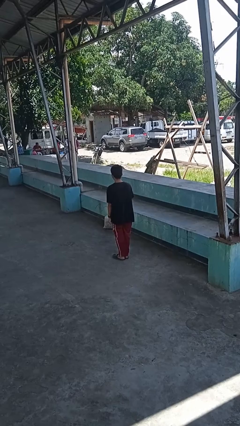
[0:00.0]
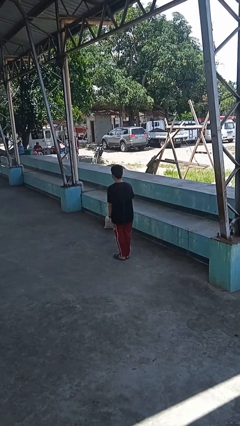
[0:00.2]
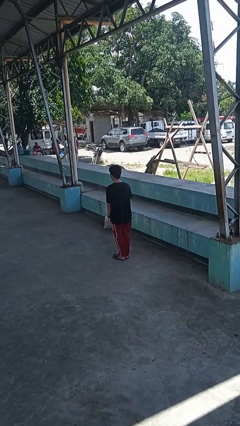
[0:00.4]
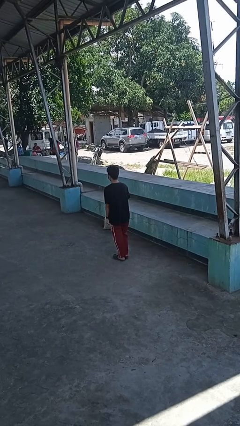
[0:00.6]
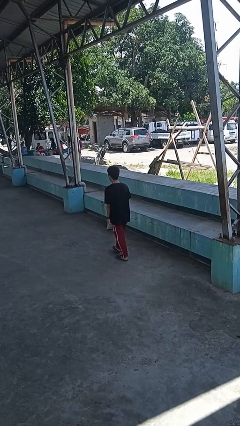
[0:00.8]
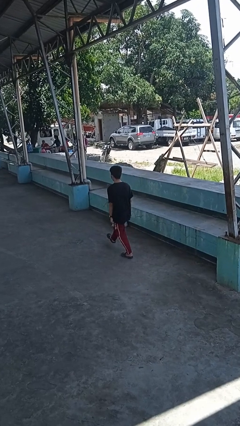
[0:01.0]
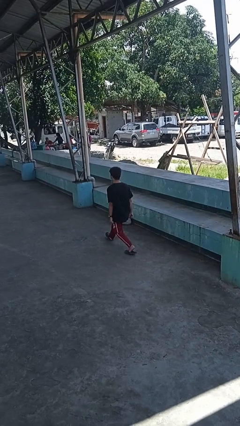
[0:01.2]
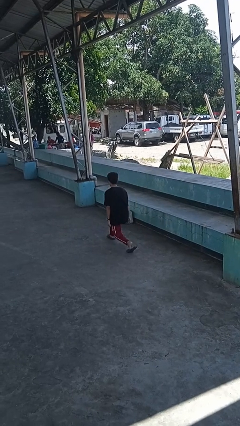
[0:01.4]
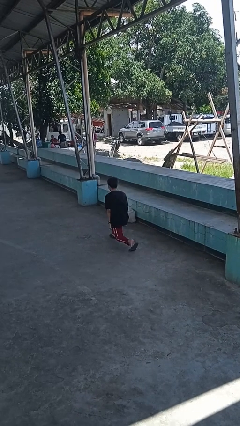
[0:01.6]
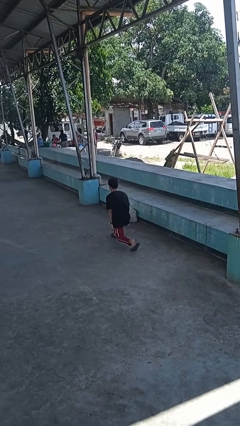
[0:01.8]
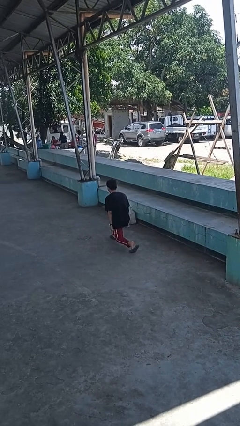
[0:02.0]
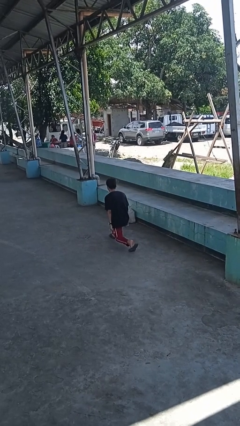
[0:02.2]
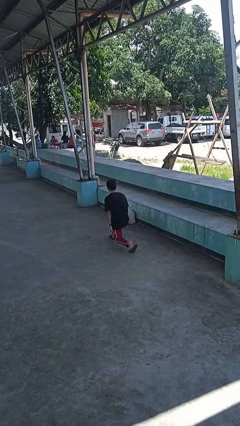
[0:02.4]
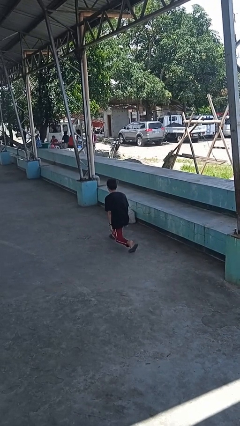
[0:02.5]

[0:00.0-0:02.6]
person exercises with lunges

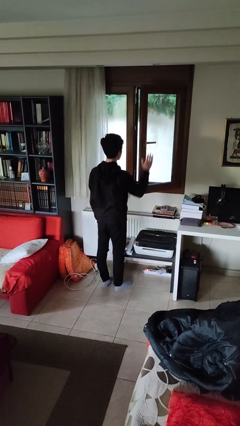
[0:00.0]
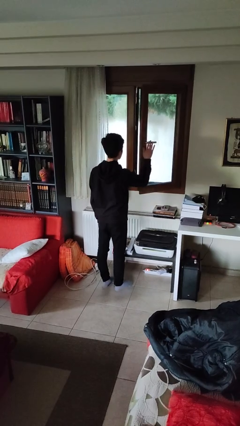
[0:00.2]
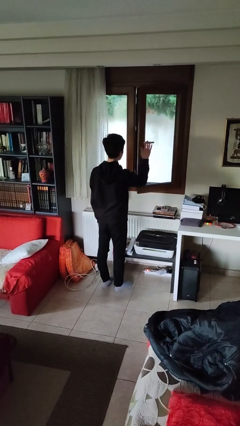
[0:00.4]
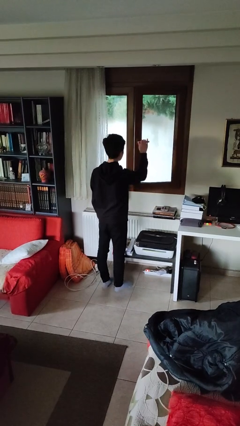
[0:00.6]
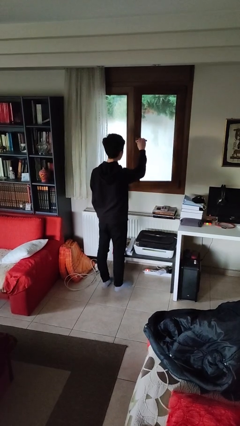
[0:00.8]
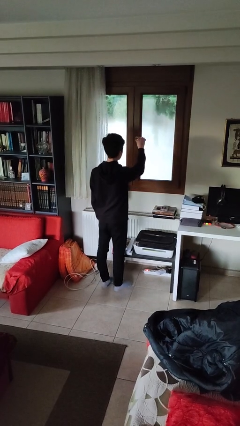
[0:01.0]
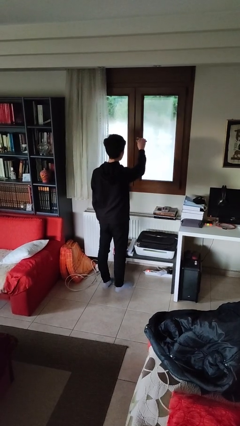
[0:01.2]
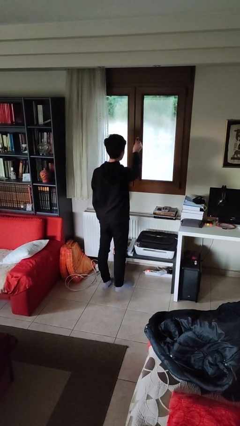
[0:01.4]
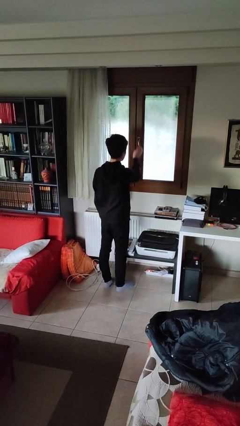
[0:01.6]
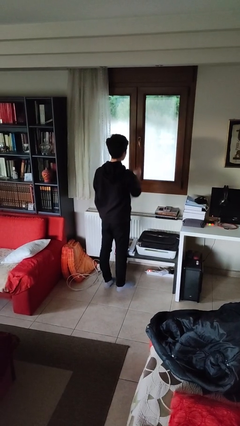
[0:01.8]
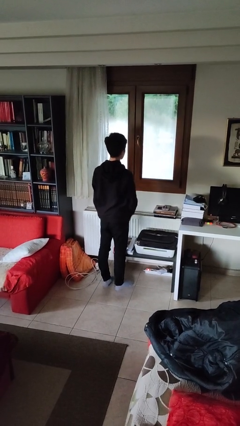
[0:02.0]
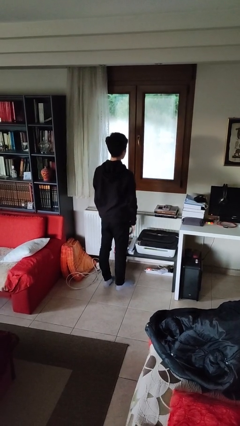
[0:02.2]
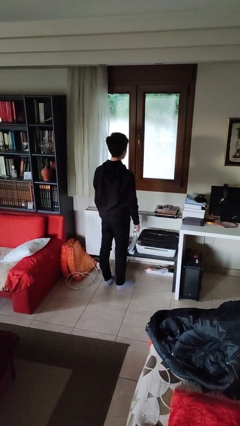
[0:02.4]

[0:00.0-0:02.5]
person closes home window

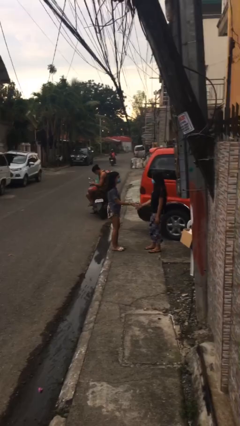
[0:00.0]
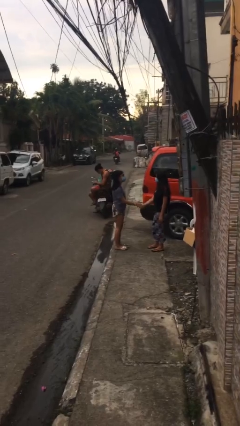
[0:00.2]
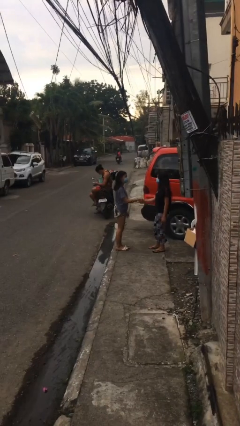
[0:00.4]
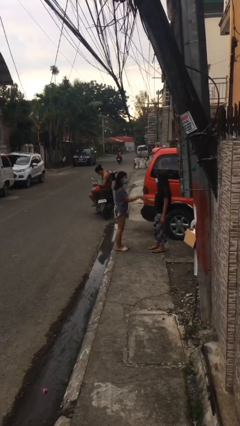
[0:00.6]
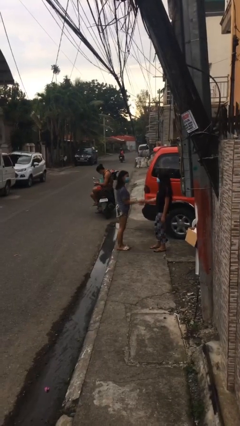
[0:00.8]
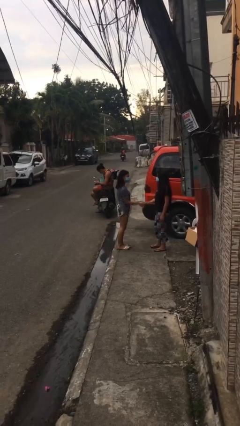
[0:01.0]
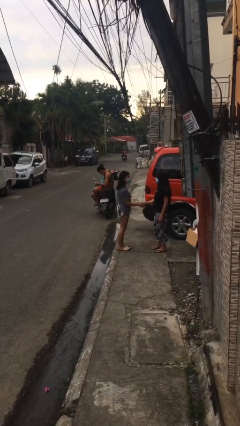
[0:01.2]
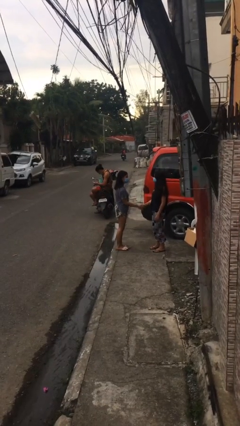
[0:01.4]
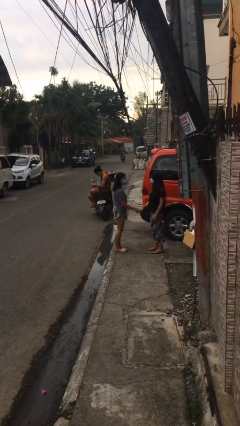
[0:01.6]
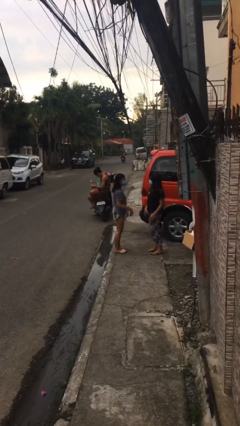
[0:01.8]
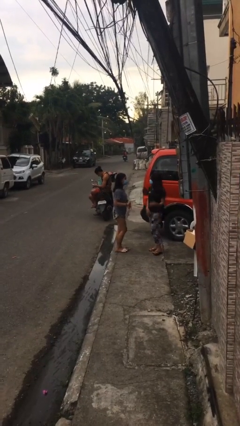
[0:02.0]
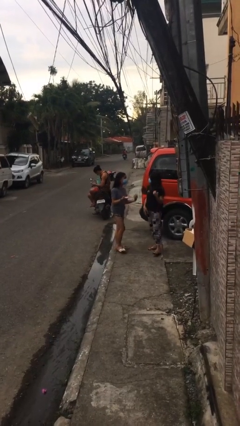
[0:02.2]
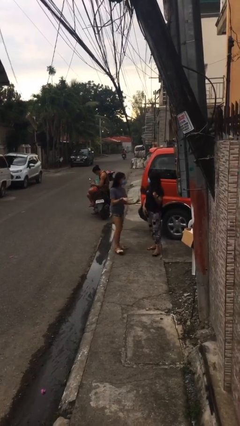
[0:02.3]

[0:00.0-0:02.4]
person shakes hand

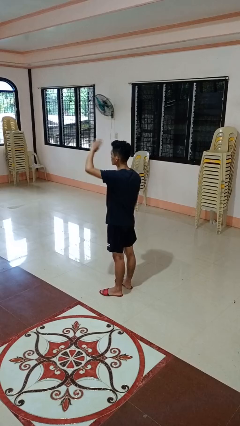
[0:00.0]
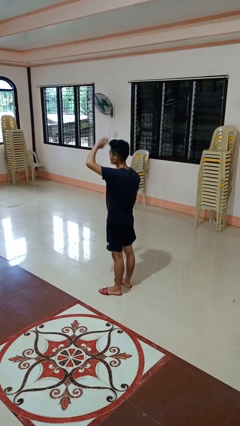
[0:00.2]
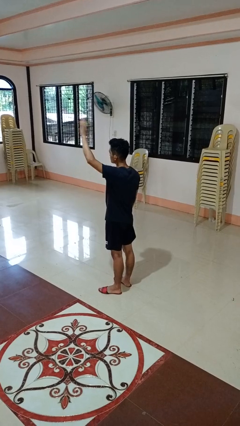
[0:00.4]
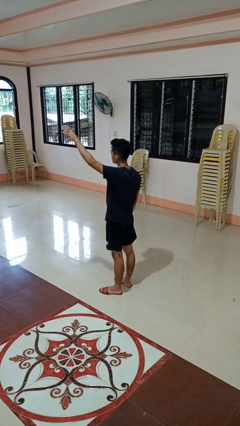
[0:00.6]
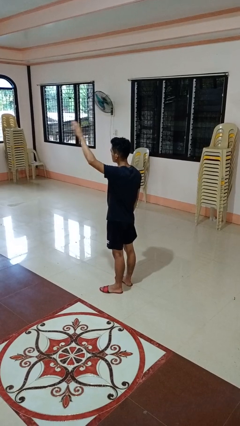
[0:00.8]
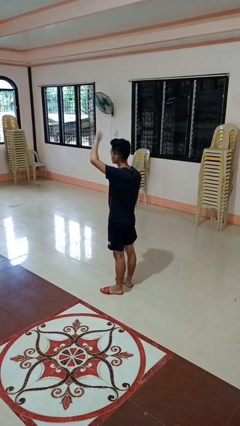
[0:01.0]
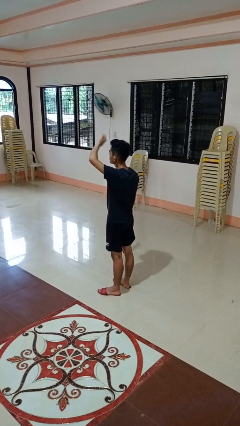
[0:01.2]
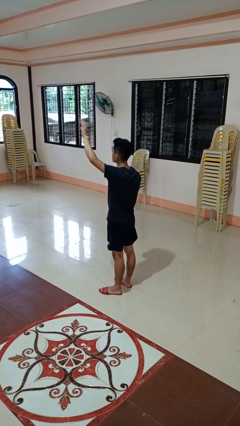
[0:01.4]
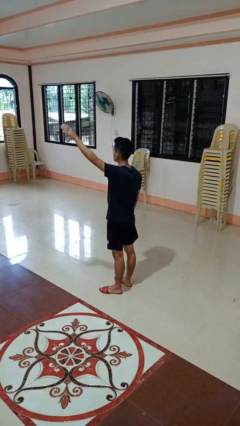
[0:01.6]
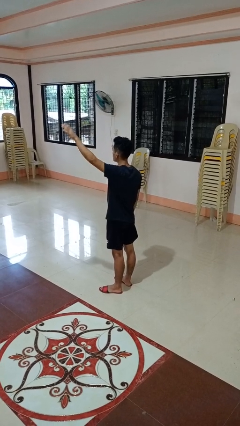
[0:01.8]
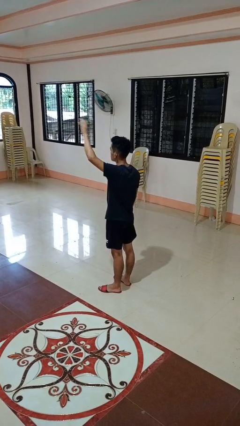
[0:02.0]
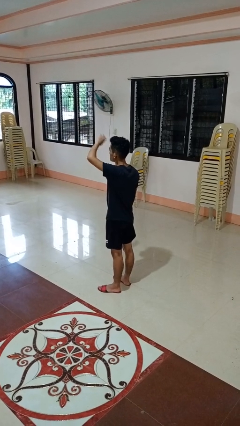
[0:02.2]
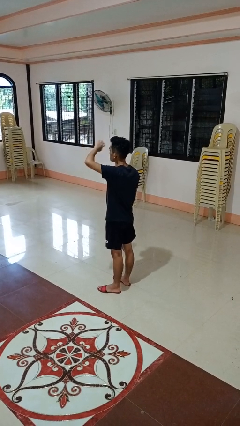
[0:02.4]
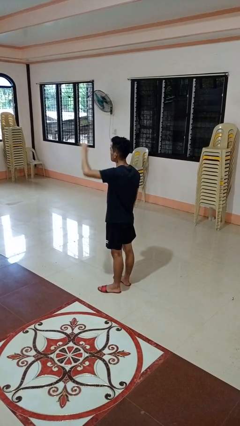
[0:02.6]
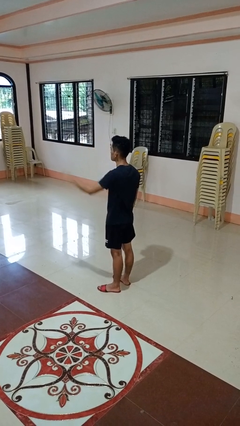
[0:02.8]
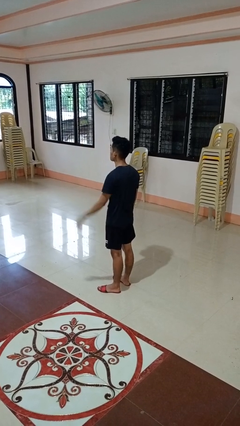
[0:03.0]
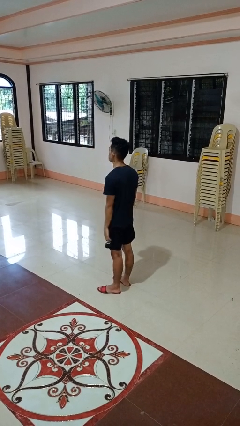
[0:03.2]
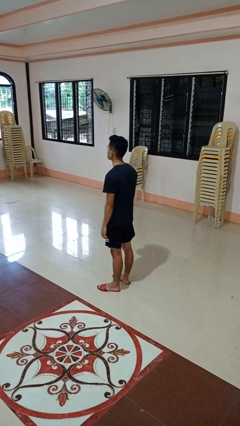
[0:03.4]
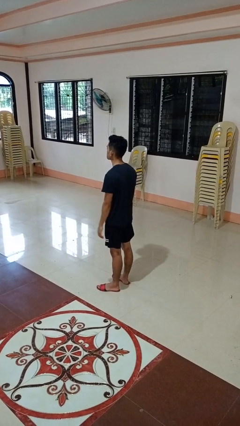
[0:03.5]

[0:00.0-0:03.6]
person waves at person

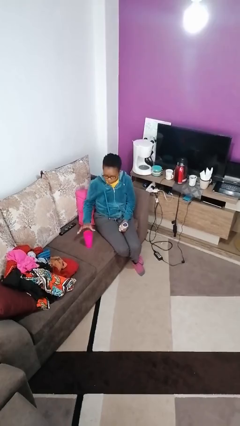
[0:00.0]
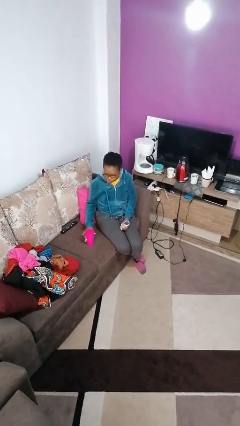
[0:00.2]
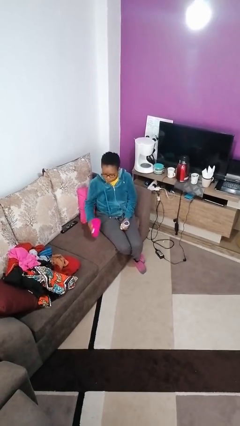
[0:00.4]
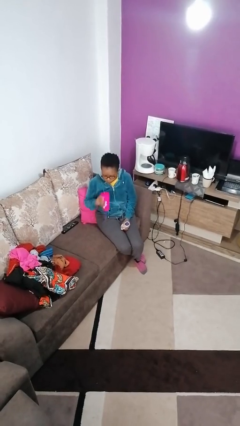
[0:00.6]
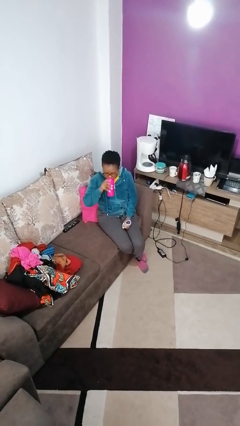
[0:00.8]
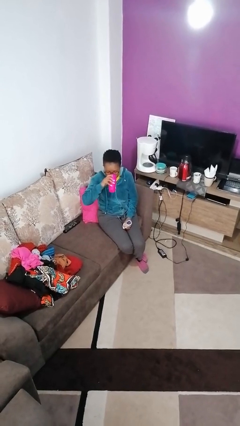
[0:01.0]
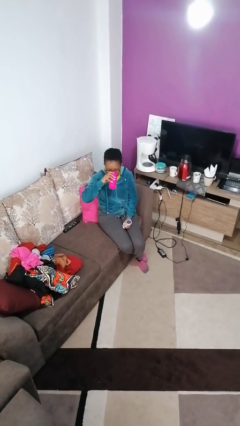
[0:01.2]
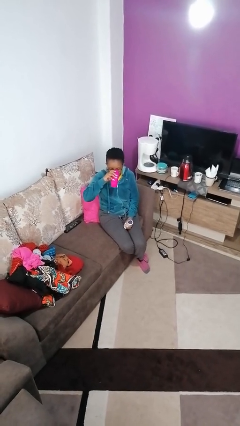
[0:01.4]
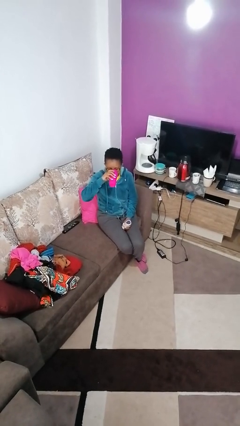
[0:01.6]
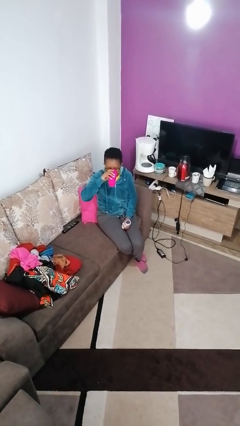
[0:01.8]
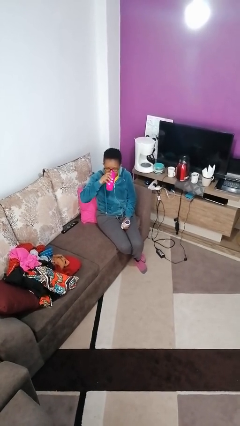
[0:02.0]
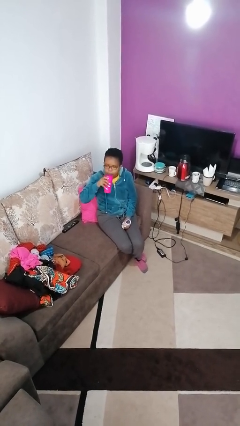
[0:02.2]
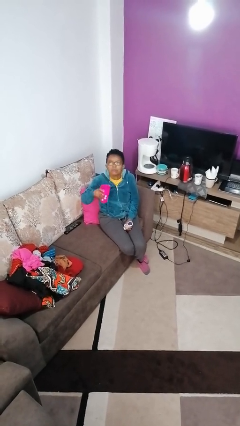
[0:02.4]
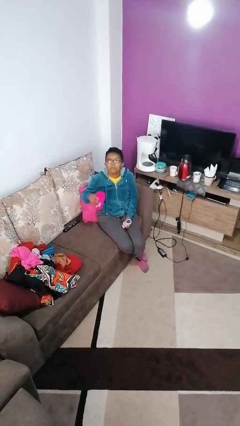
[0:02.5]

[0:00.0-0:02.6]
person drinks from cup

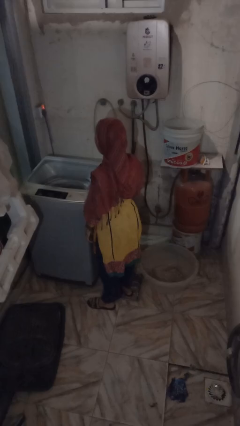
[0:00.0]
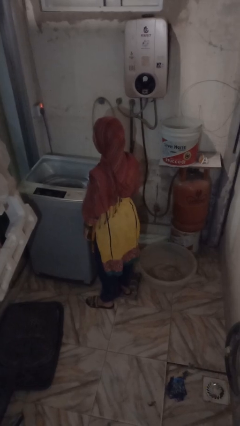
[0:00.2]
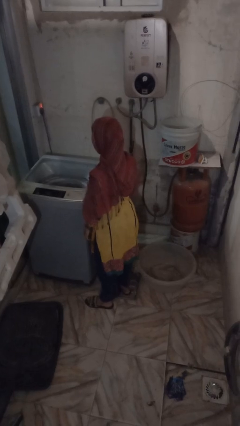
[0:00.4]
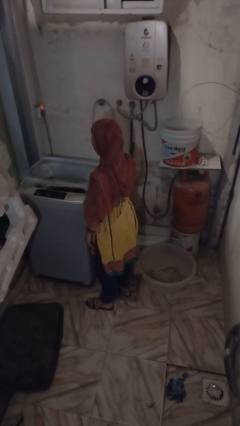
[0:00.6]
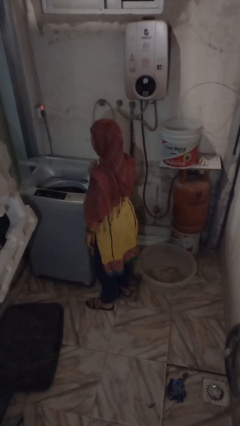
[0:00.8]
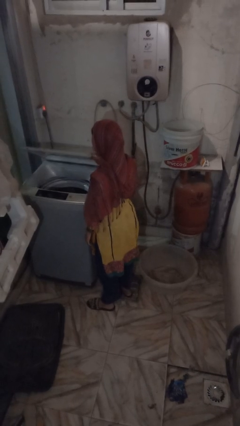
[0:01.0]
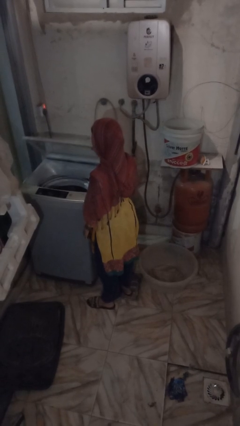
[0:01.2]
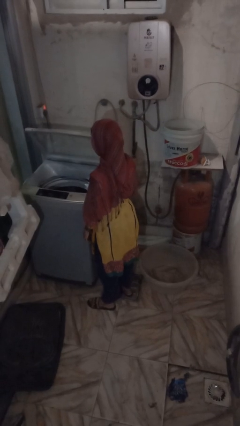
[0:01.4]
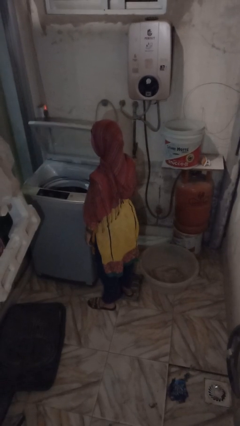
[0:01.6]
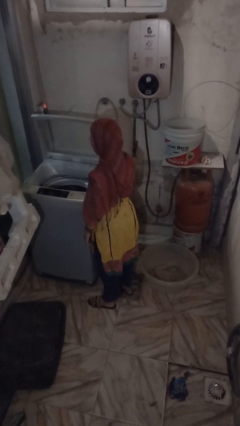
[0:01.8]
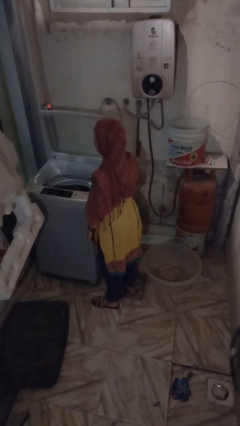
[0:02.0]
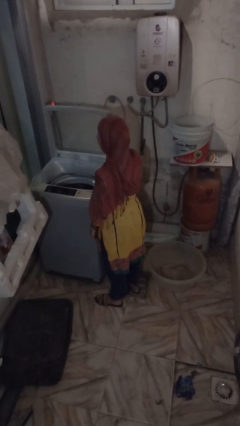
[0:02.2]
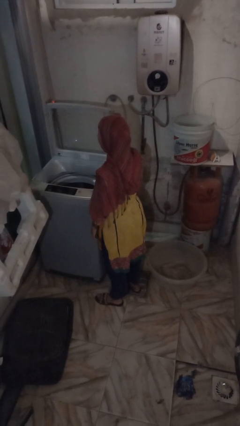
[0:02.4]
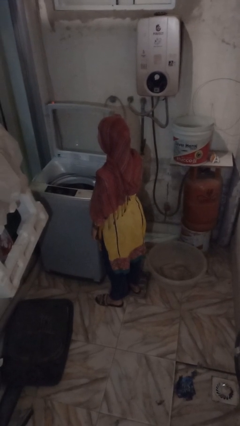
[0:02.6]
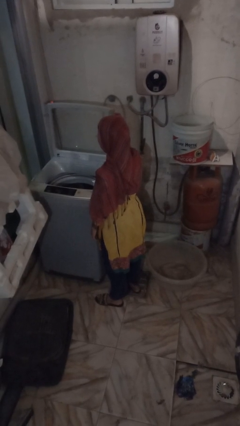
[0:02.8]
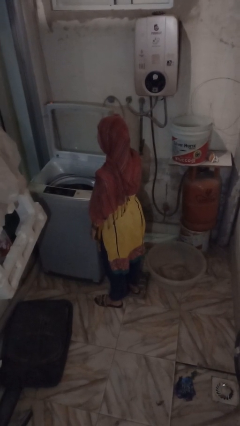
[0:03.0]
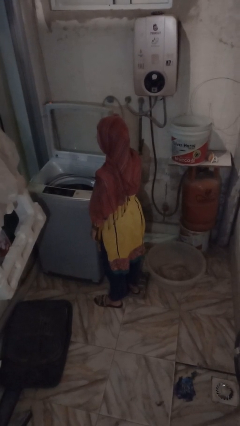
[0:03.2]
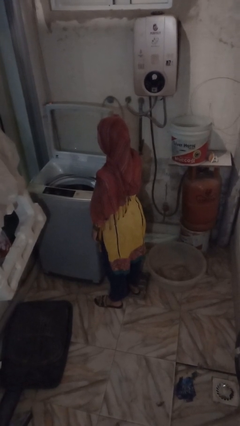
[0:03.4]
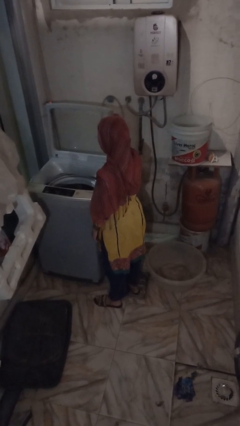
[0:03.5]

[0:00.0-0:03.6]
person opens clothes washer
